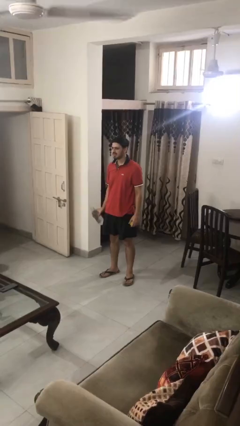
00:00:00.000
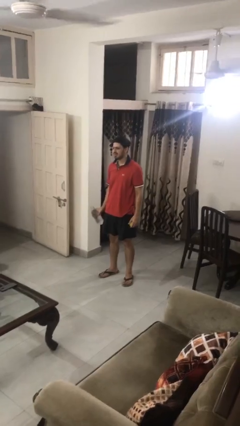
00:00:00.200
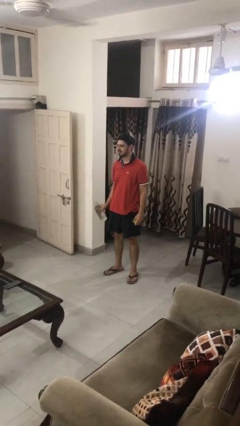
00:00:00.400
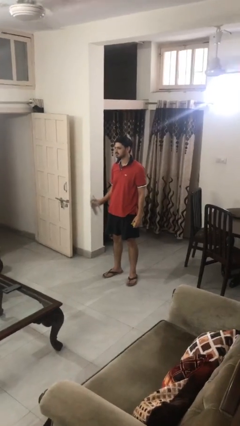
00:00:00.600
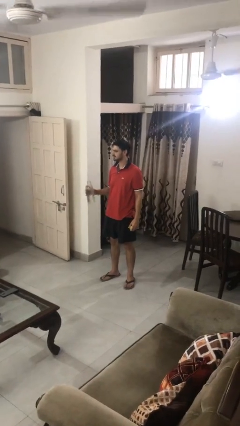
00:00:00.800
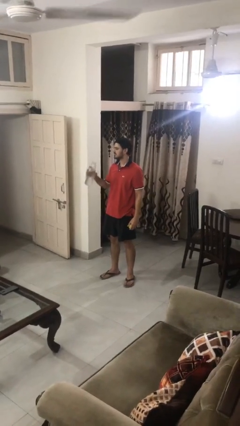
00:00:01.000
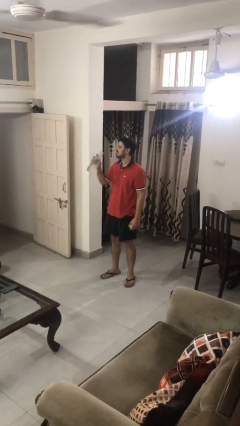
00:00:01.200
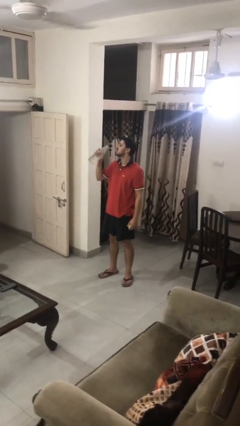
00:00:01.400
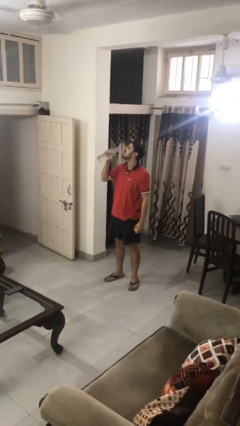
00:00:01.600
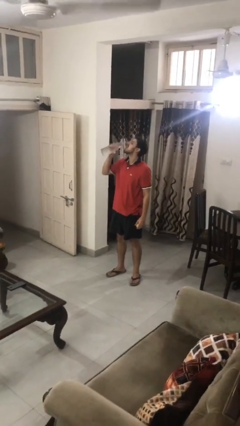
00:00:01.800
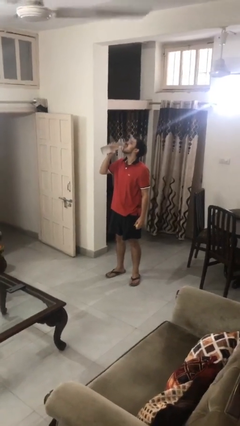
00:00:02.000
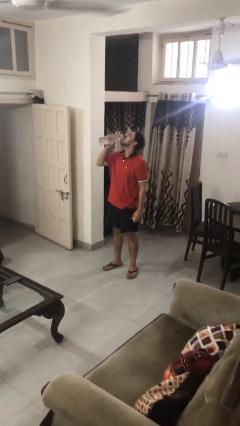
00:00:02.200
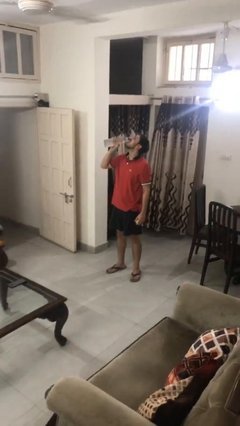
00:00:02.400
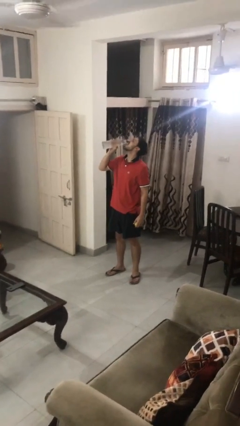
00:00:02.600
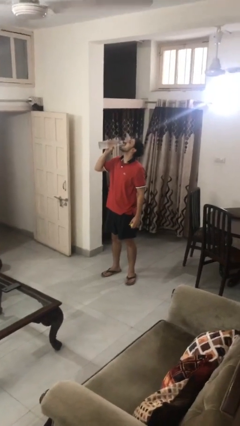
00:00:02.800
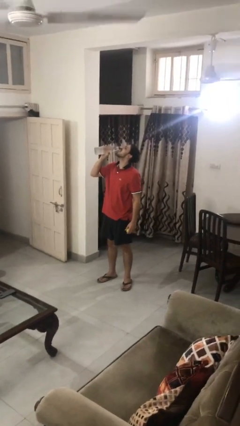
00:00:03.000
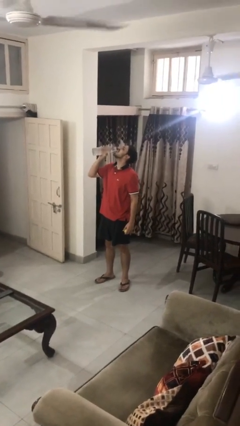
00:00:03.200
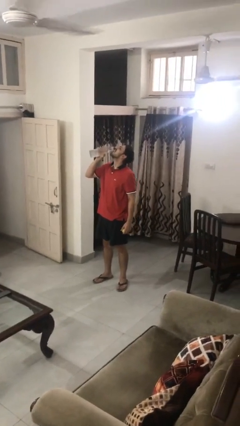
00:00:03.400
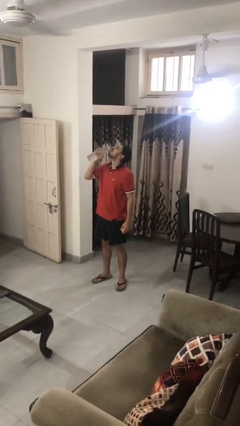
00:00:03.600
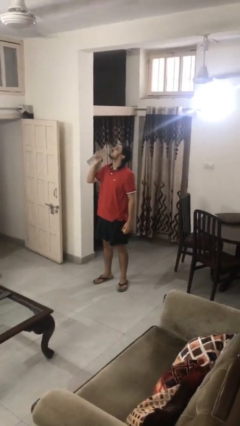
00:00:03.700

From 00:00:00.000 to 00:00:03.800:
person drinks from bottle

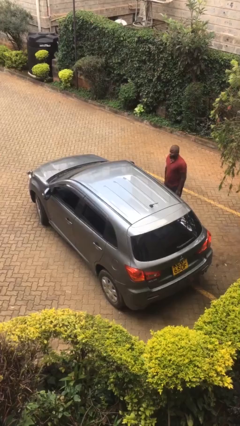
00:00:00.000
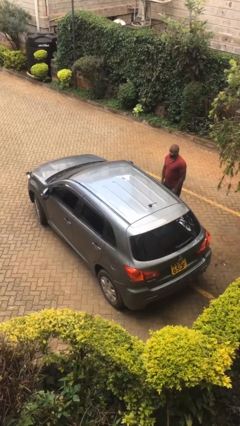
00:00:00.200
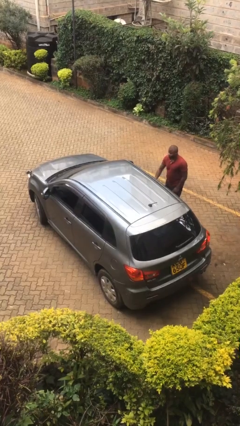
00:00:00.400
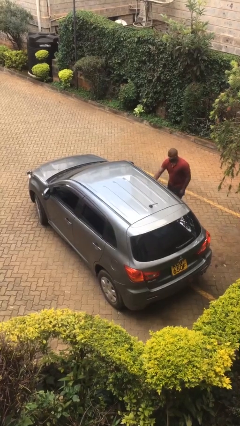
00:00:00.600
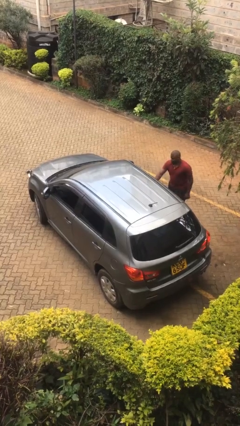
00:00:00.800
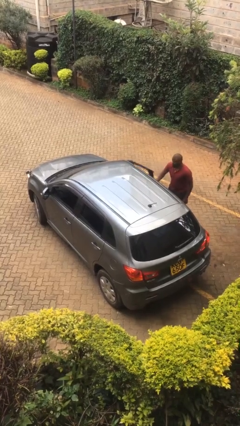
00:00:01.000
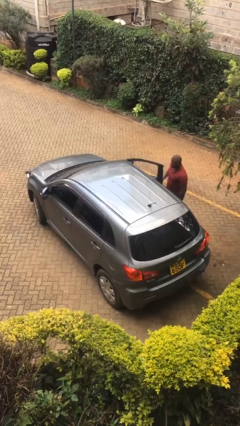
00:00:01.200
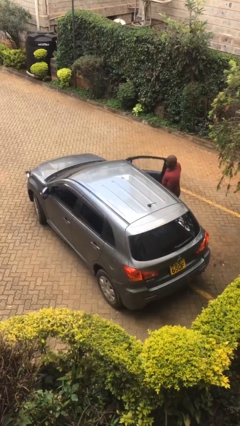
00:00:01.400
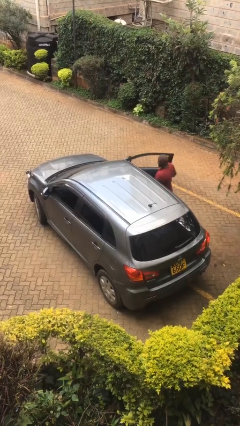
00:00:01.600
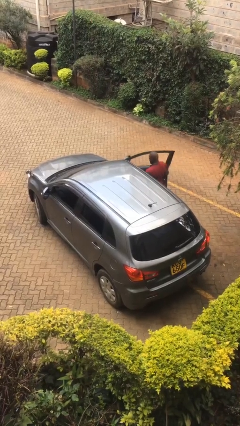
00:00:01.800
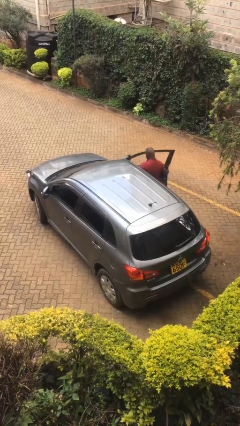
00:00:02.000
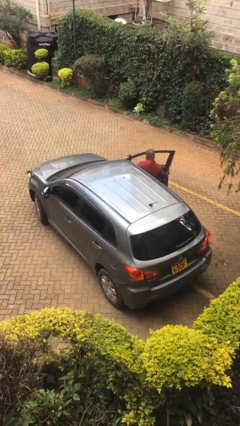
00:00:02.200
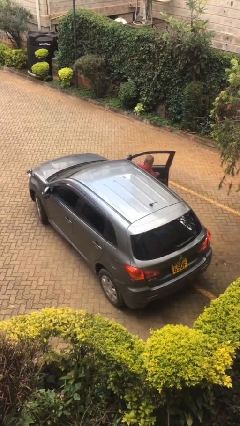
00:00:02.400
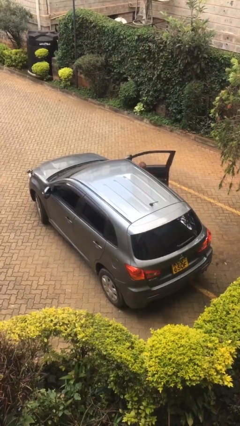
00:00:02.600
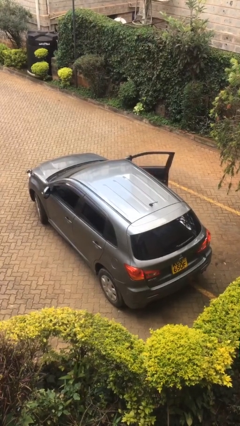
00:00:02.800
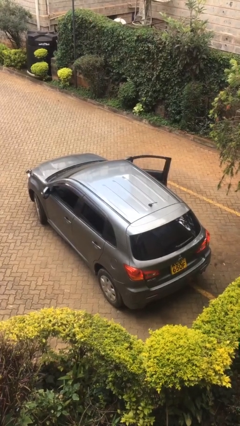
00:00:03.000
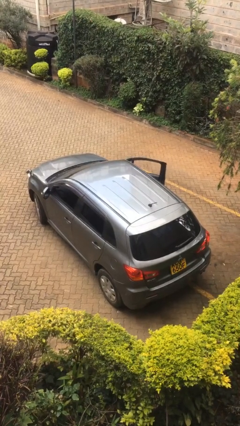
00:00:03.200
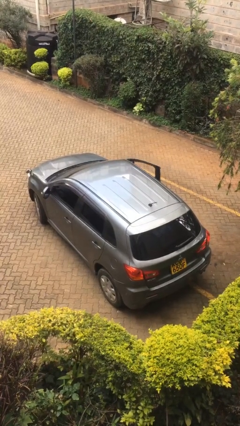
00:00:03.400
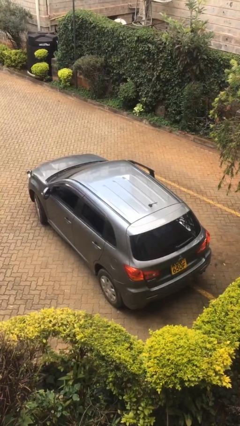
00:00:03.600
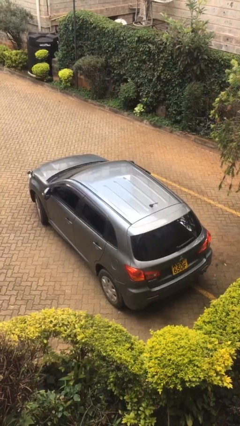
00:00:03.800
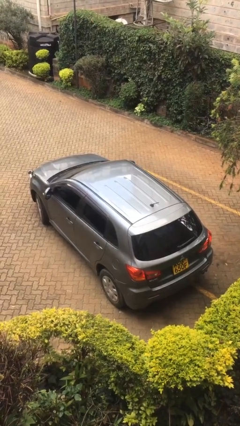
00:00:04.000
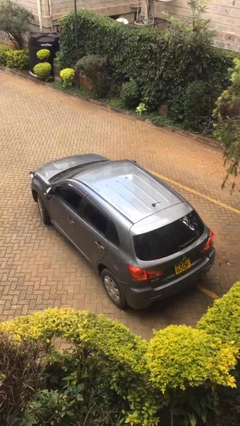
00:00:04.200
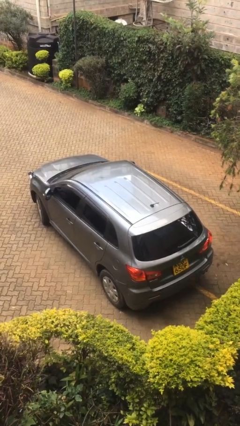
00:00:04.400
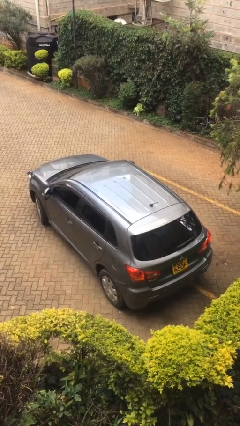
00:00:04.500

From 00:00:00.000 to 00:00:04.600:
car picks up person

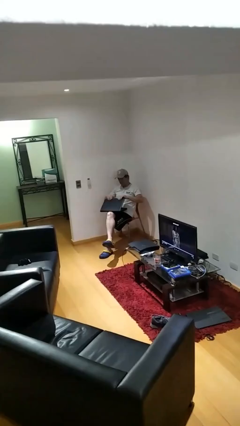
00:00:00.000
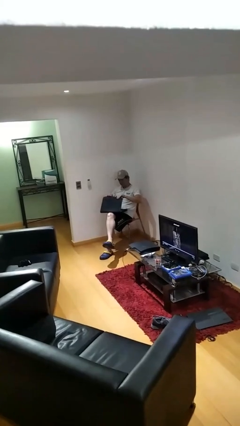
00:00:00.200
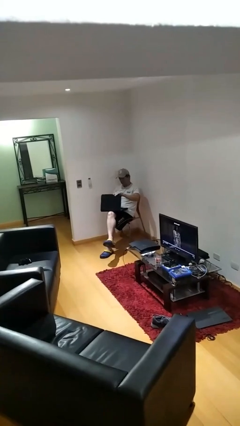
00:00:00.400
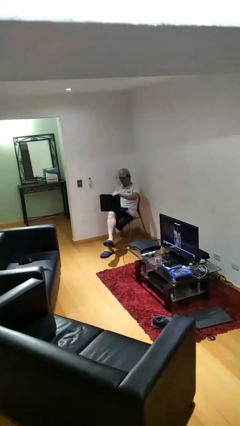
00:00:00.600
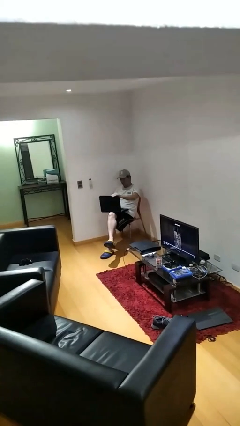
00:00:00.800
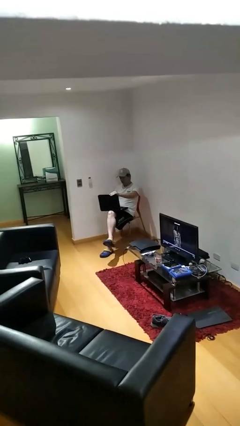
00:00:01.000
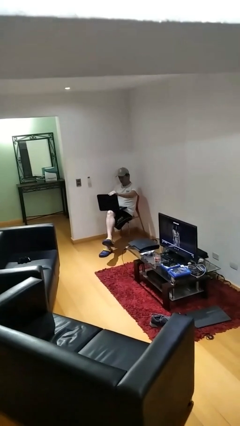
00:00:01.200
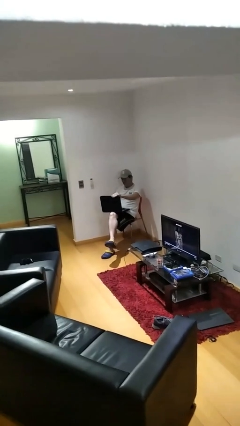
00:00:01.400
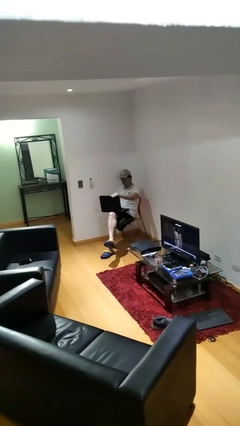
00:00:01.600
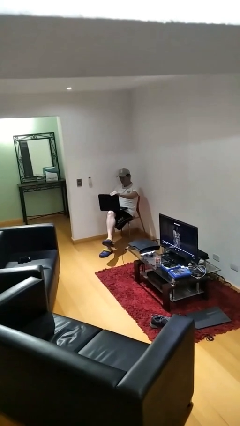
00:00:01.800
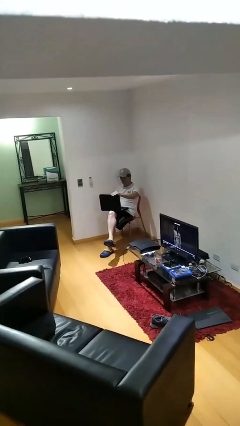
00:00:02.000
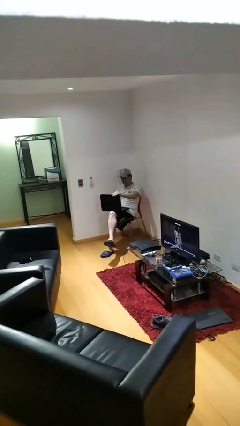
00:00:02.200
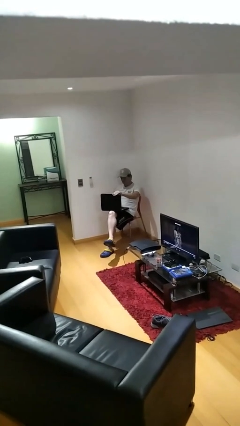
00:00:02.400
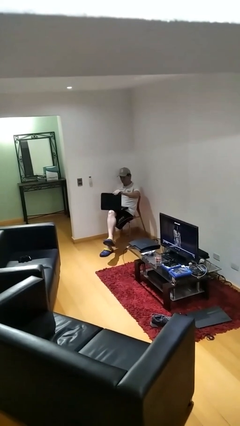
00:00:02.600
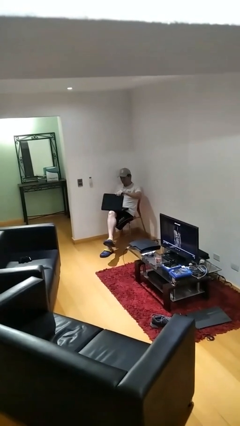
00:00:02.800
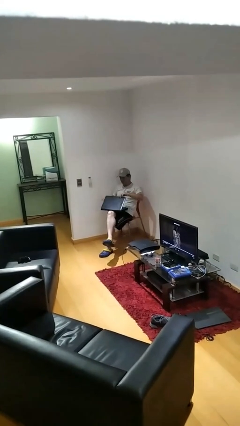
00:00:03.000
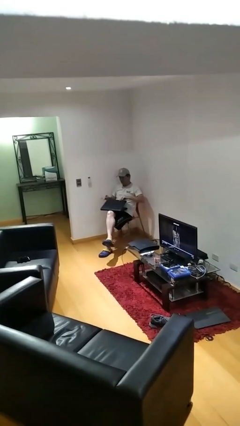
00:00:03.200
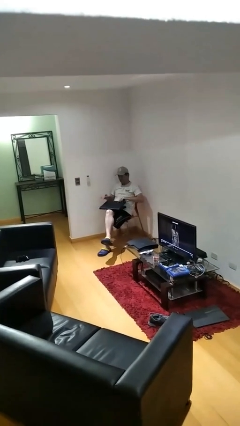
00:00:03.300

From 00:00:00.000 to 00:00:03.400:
person interacts with laptop

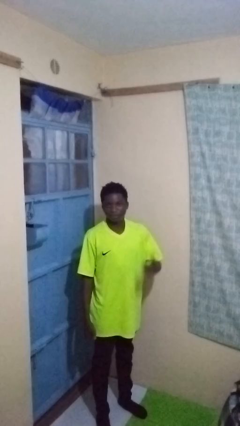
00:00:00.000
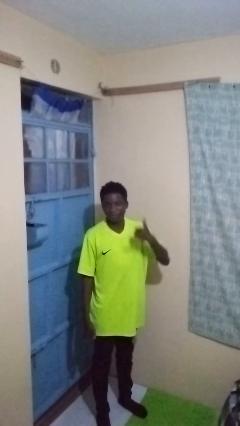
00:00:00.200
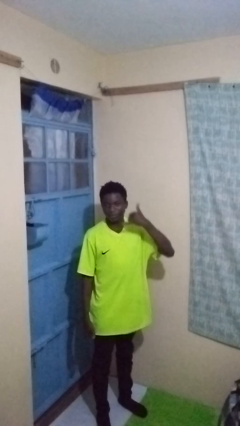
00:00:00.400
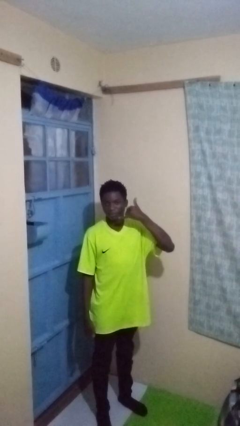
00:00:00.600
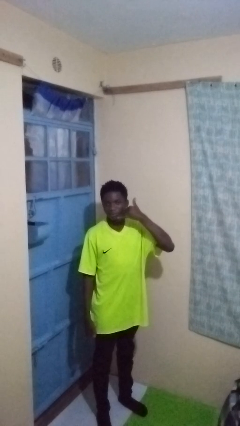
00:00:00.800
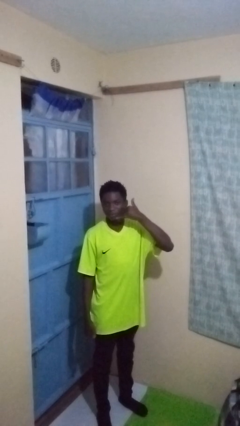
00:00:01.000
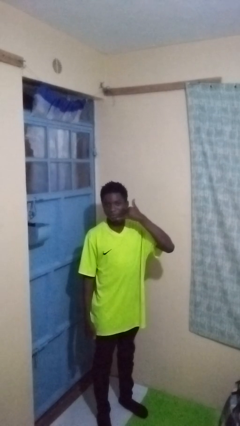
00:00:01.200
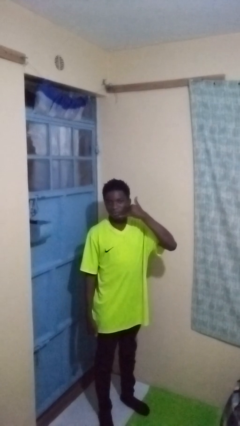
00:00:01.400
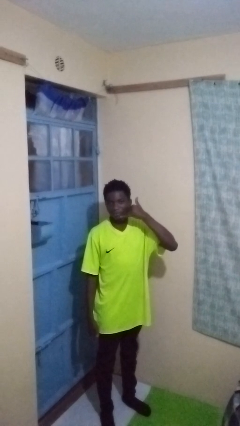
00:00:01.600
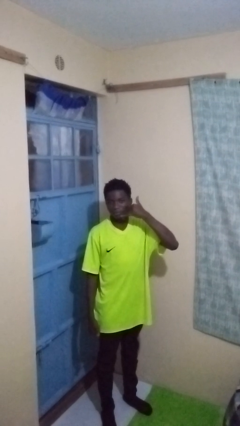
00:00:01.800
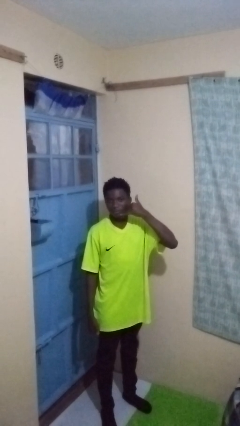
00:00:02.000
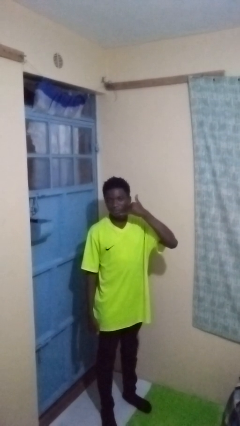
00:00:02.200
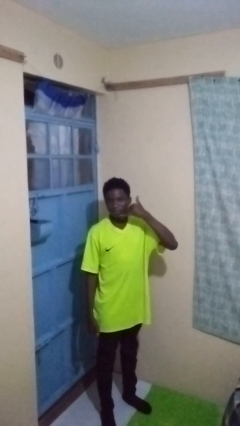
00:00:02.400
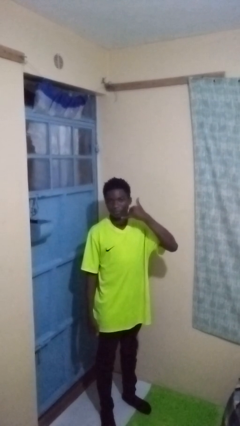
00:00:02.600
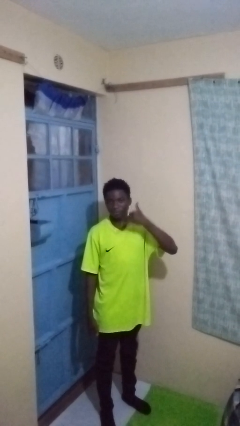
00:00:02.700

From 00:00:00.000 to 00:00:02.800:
person gestures call me

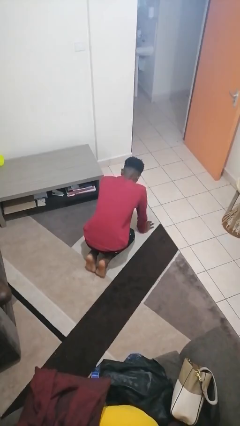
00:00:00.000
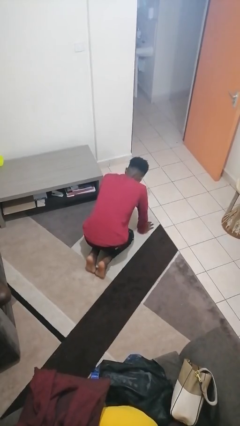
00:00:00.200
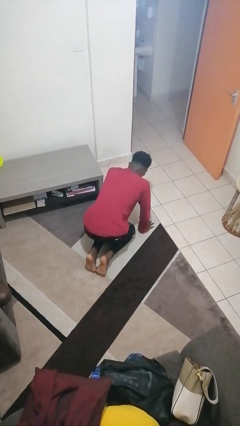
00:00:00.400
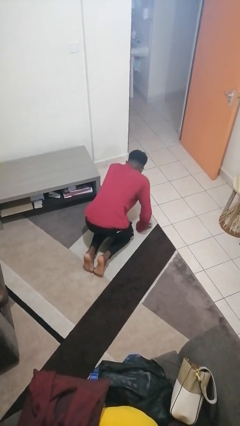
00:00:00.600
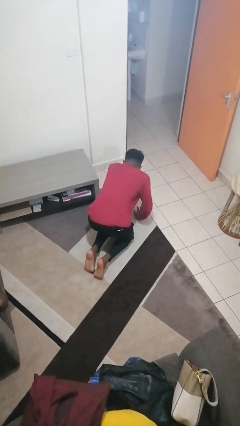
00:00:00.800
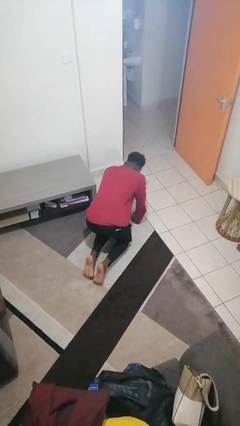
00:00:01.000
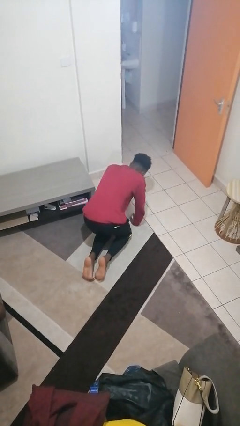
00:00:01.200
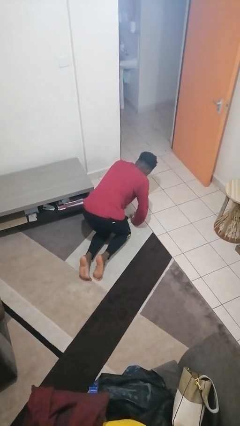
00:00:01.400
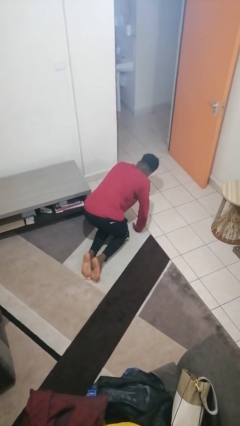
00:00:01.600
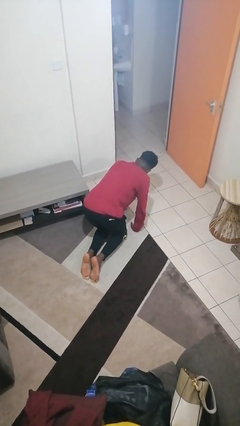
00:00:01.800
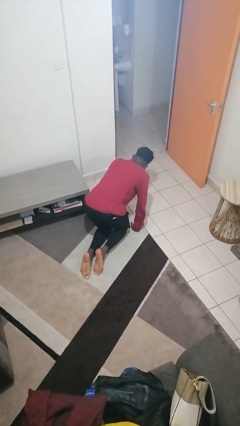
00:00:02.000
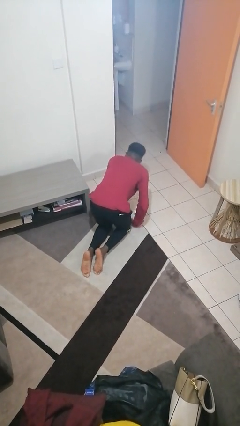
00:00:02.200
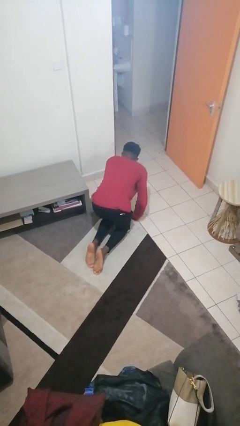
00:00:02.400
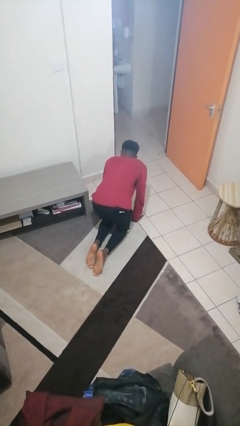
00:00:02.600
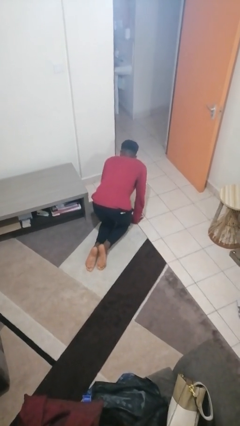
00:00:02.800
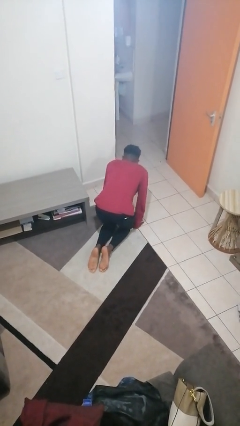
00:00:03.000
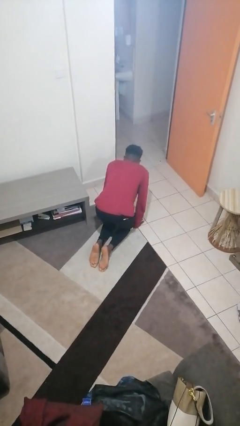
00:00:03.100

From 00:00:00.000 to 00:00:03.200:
person crawls
